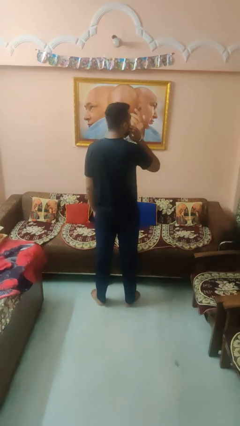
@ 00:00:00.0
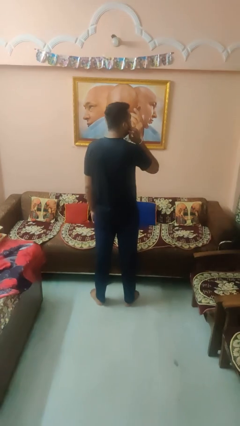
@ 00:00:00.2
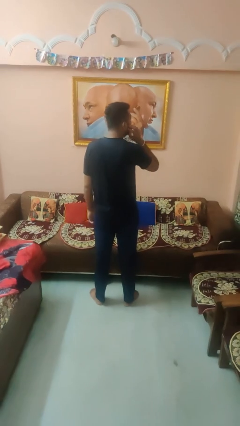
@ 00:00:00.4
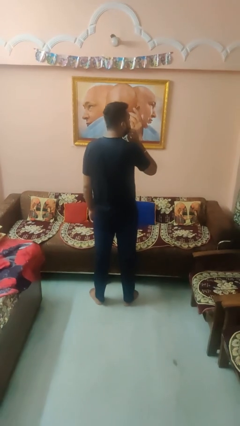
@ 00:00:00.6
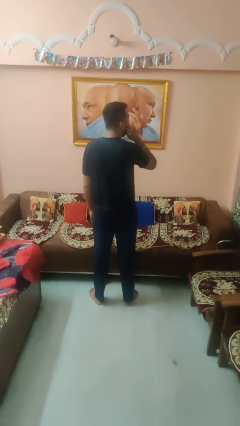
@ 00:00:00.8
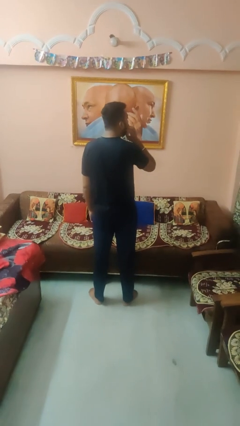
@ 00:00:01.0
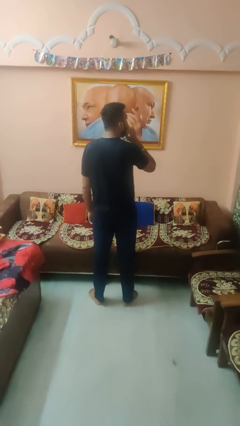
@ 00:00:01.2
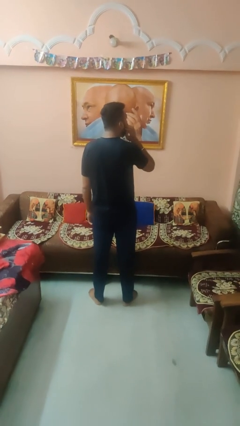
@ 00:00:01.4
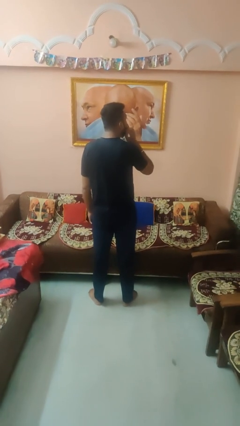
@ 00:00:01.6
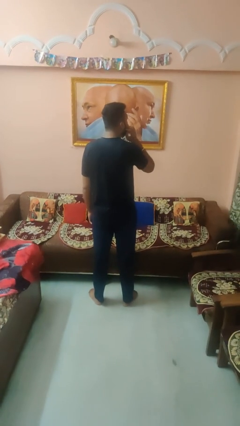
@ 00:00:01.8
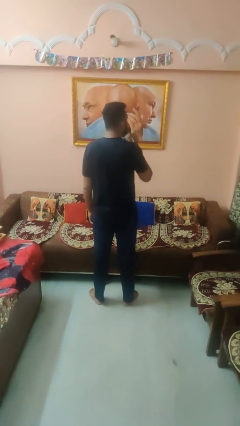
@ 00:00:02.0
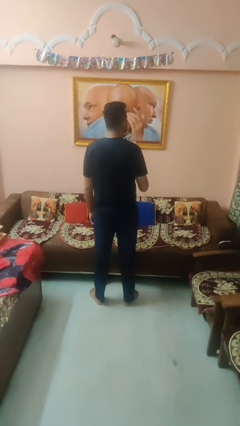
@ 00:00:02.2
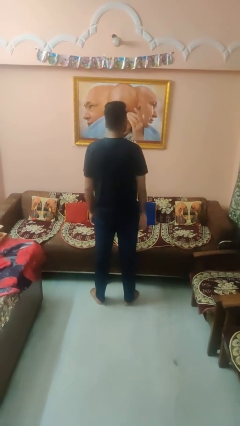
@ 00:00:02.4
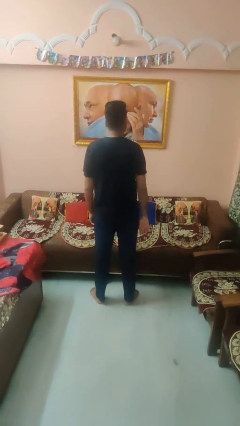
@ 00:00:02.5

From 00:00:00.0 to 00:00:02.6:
person scratches face

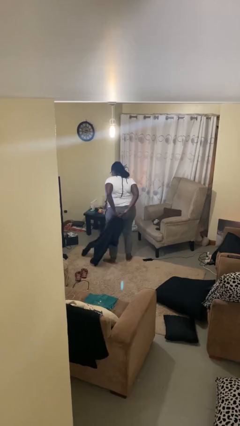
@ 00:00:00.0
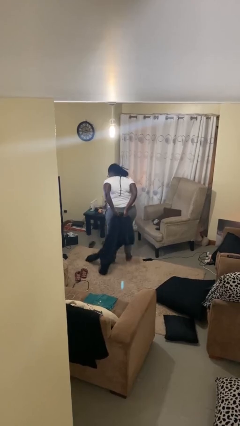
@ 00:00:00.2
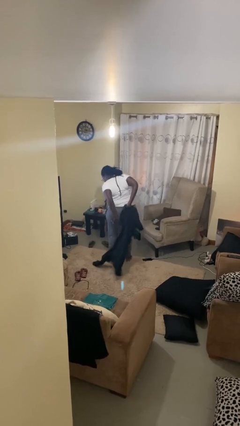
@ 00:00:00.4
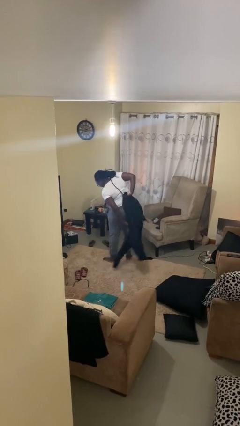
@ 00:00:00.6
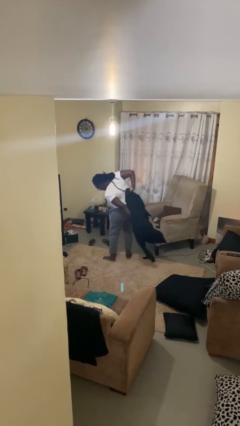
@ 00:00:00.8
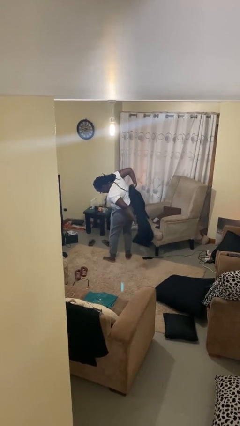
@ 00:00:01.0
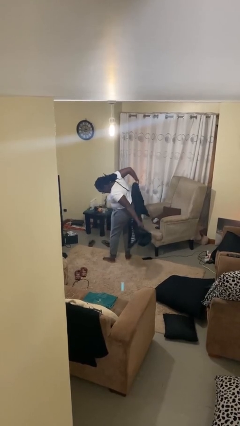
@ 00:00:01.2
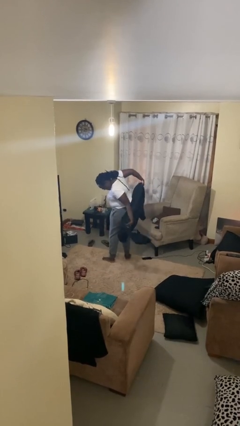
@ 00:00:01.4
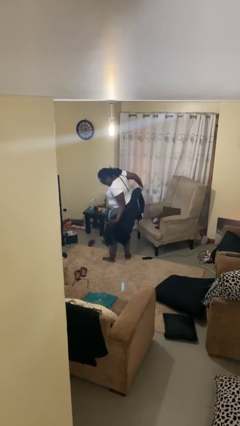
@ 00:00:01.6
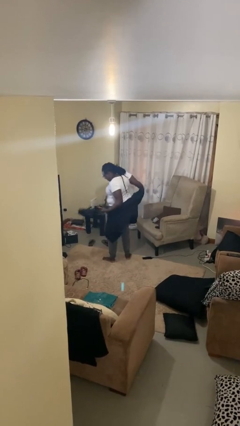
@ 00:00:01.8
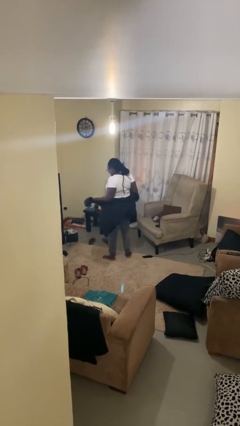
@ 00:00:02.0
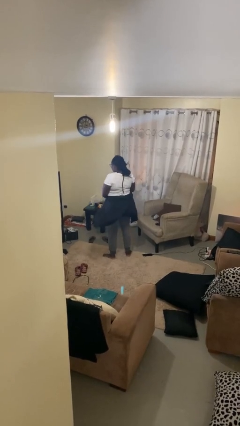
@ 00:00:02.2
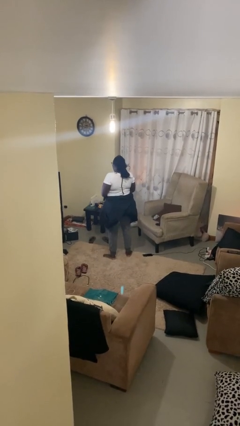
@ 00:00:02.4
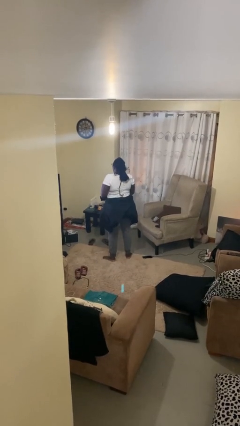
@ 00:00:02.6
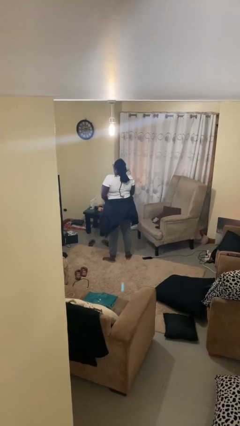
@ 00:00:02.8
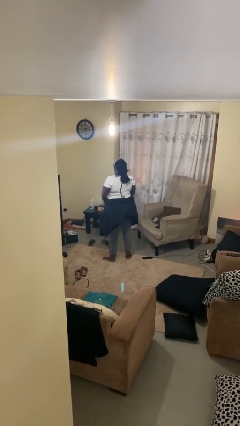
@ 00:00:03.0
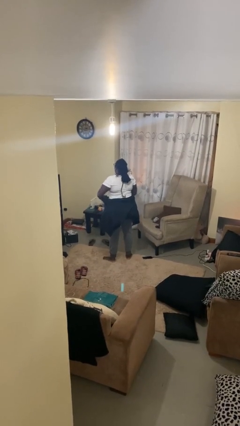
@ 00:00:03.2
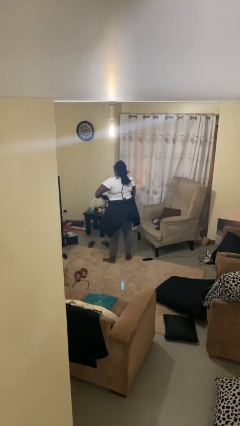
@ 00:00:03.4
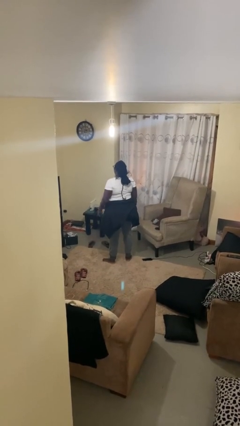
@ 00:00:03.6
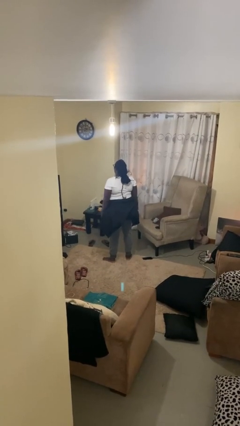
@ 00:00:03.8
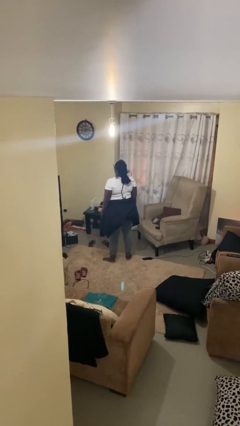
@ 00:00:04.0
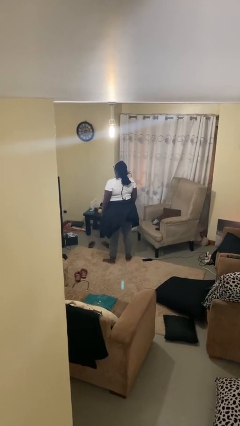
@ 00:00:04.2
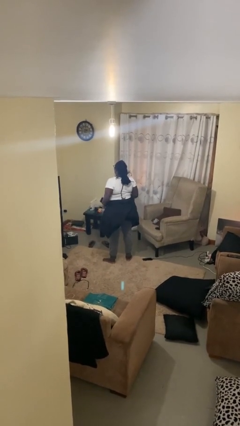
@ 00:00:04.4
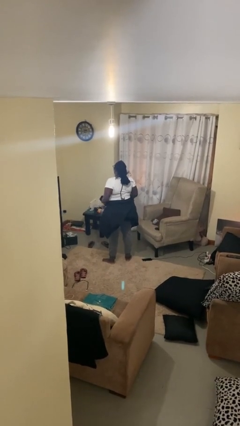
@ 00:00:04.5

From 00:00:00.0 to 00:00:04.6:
person ties jacket around waist

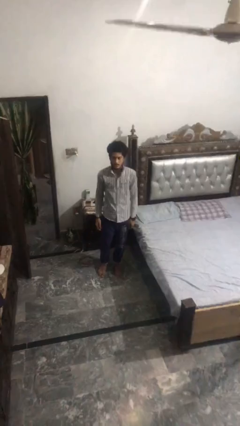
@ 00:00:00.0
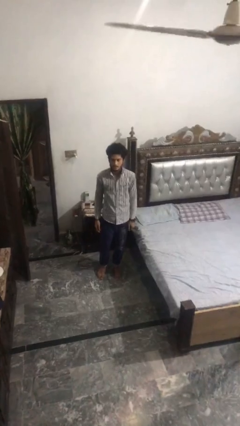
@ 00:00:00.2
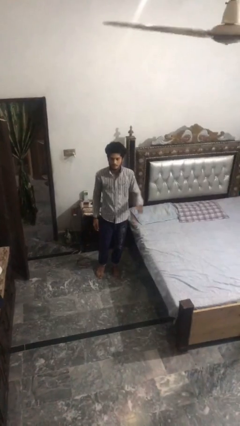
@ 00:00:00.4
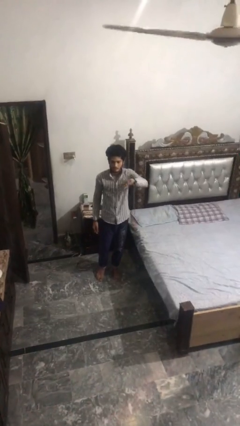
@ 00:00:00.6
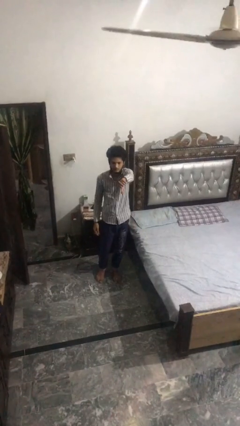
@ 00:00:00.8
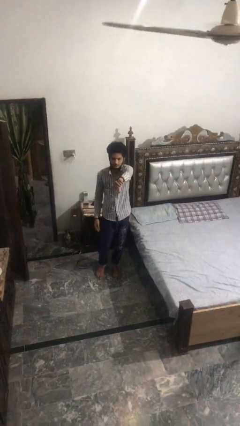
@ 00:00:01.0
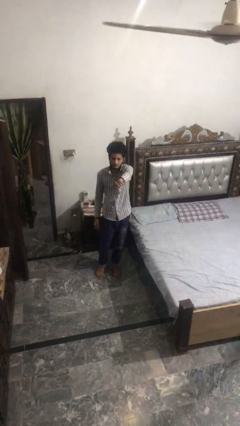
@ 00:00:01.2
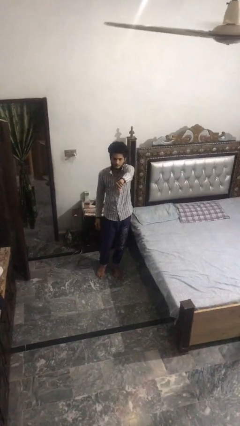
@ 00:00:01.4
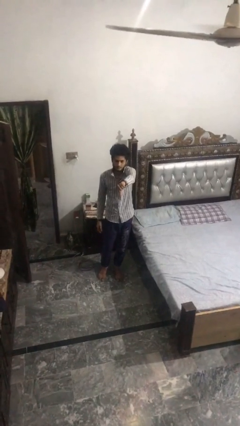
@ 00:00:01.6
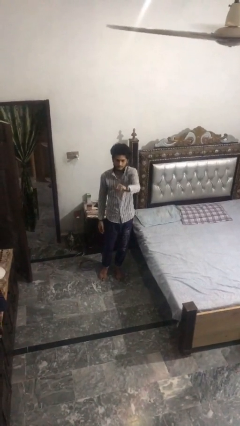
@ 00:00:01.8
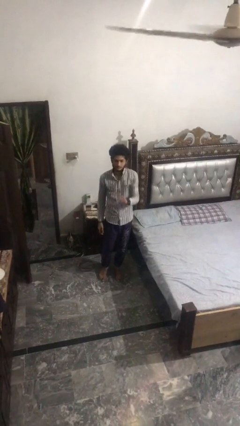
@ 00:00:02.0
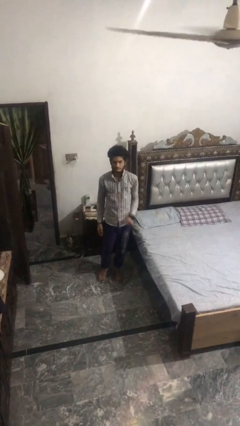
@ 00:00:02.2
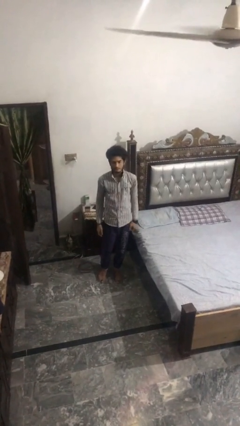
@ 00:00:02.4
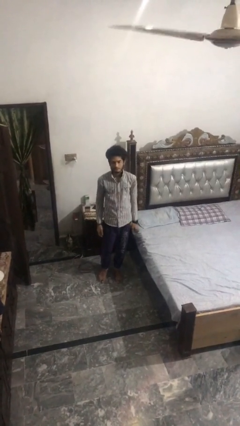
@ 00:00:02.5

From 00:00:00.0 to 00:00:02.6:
person gestures thumbs down

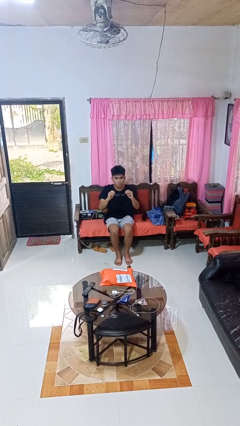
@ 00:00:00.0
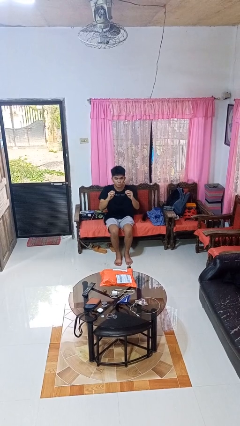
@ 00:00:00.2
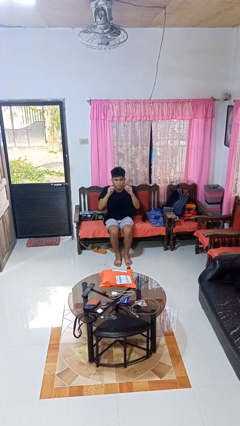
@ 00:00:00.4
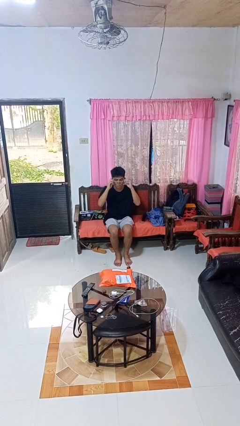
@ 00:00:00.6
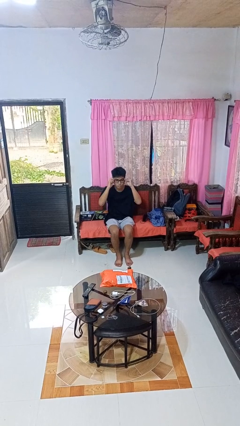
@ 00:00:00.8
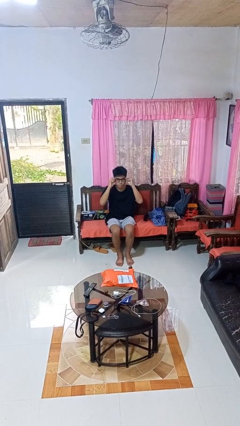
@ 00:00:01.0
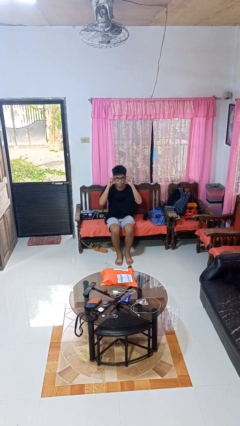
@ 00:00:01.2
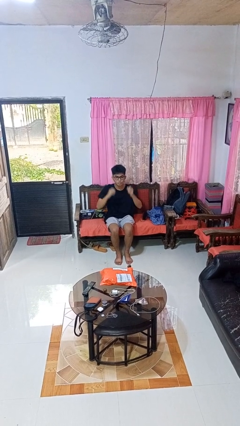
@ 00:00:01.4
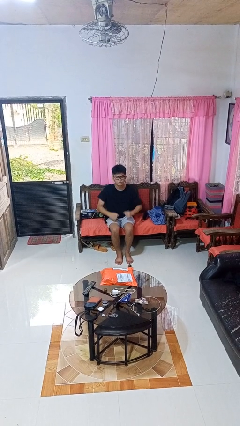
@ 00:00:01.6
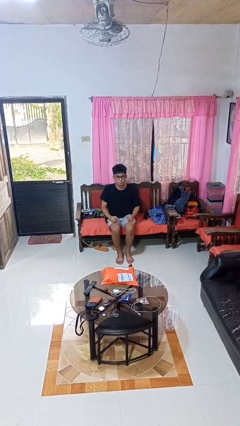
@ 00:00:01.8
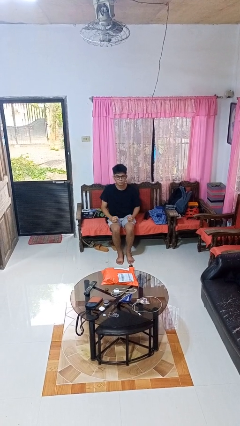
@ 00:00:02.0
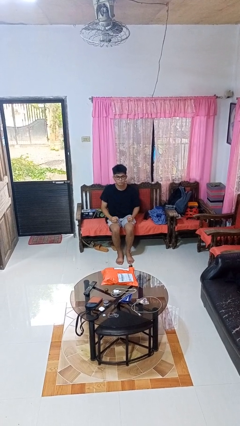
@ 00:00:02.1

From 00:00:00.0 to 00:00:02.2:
person puts on glasses

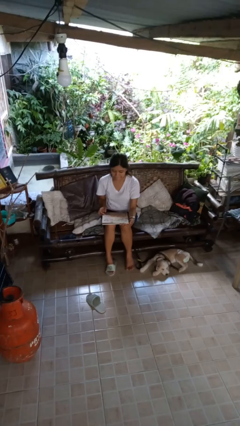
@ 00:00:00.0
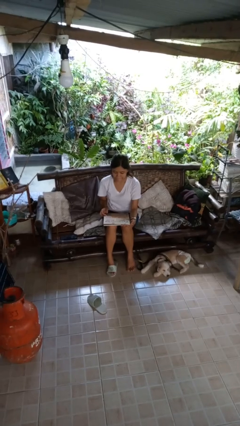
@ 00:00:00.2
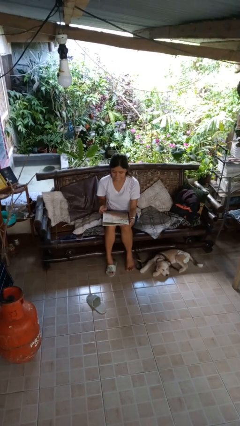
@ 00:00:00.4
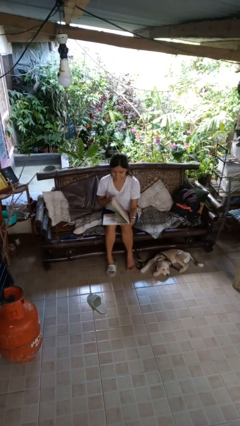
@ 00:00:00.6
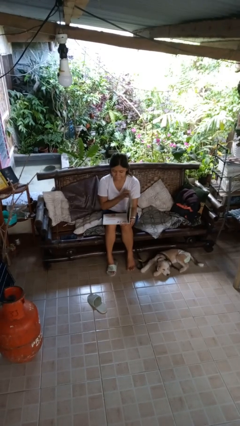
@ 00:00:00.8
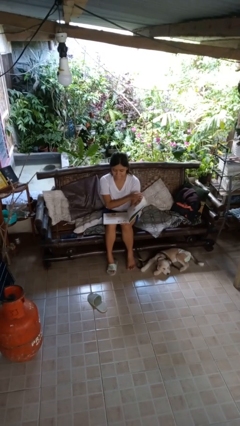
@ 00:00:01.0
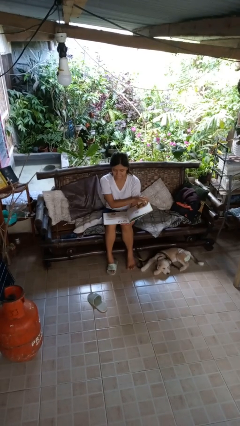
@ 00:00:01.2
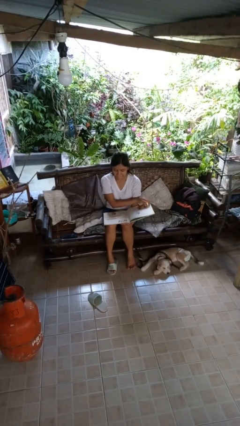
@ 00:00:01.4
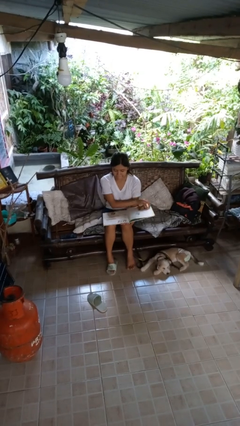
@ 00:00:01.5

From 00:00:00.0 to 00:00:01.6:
person reads book

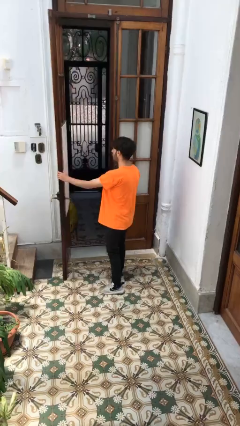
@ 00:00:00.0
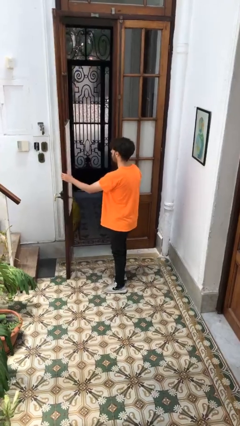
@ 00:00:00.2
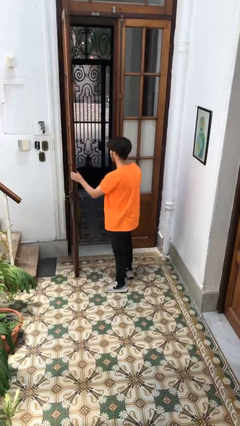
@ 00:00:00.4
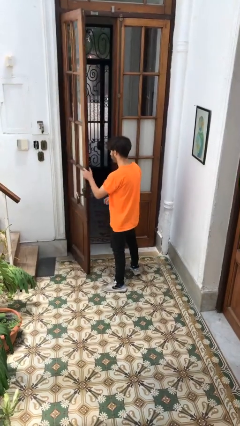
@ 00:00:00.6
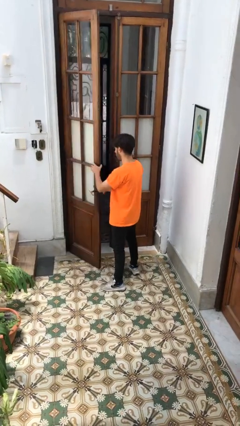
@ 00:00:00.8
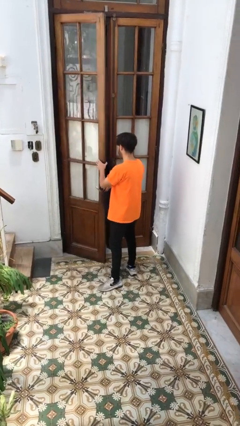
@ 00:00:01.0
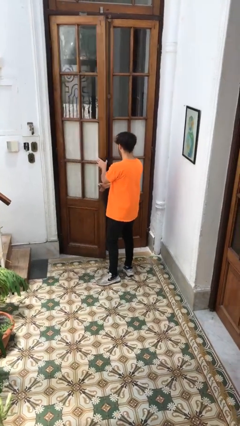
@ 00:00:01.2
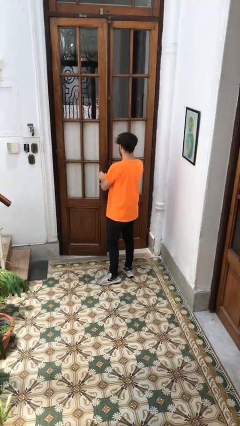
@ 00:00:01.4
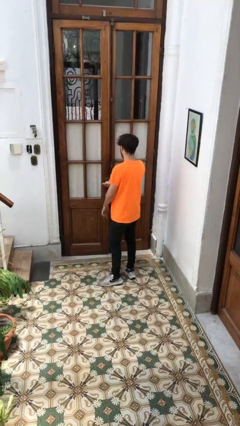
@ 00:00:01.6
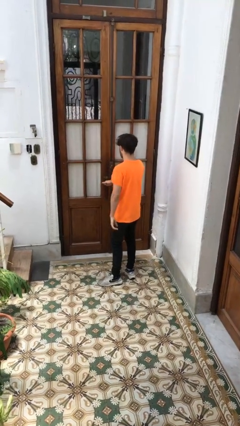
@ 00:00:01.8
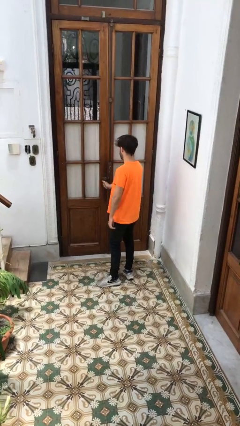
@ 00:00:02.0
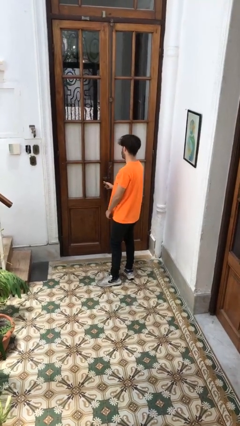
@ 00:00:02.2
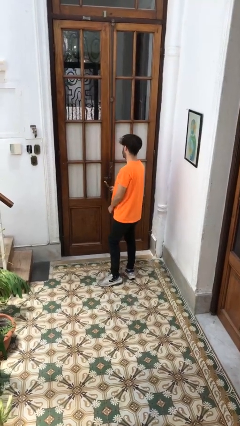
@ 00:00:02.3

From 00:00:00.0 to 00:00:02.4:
person closes facility door

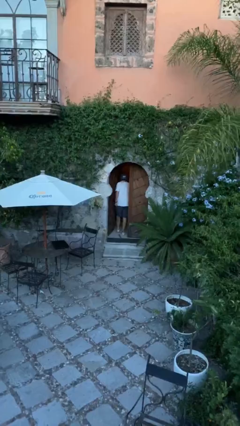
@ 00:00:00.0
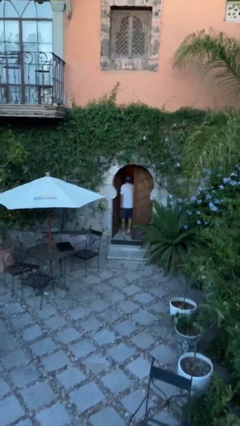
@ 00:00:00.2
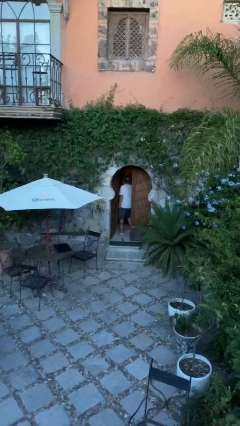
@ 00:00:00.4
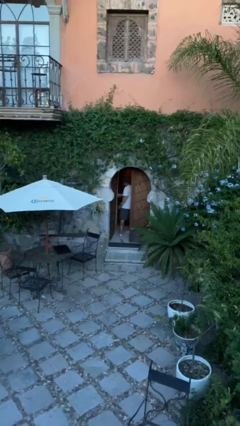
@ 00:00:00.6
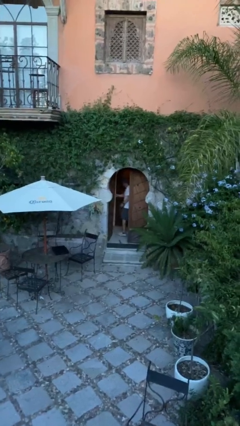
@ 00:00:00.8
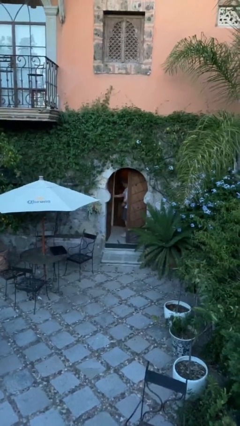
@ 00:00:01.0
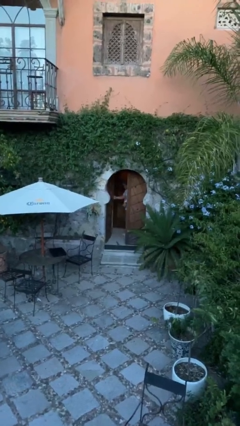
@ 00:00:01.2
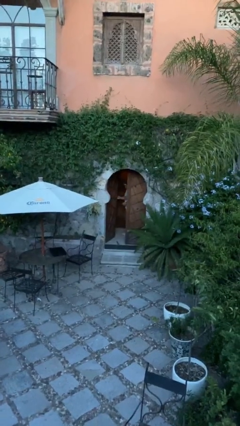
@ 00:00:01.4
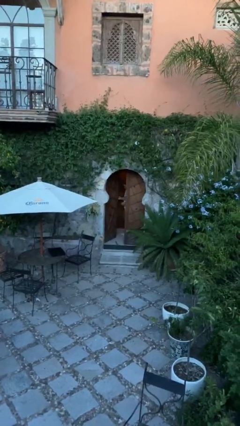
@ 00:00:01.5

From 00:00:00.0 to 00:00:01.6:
person exits scene through structure
